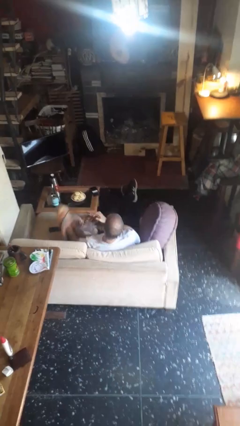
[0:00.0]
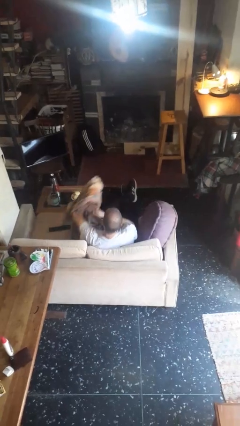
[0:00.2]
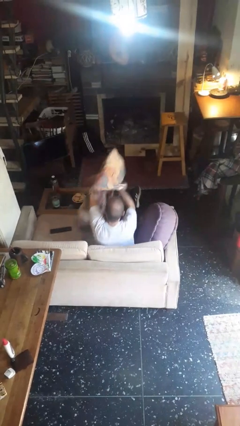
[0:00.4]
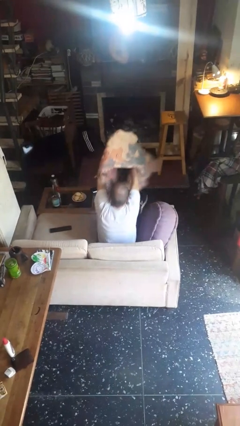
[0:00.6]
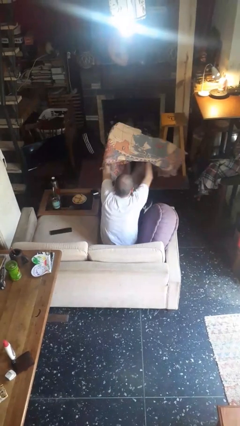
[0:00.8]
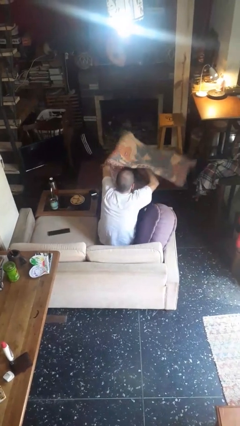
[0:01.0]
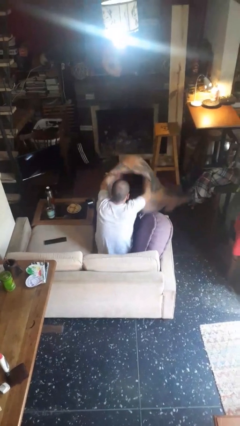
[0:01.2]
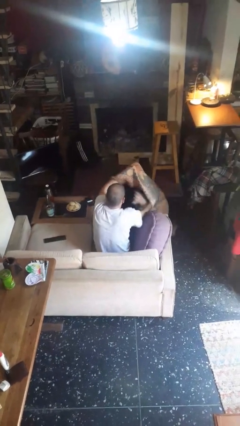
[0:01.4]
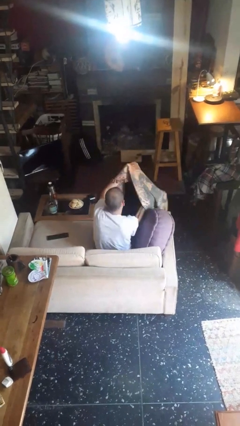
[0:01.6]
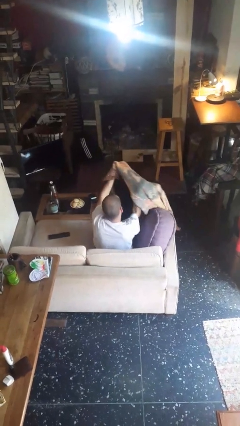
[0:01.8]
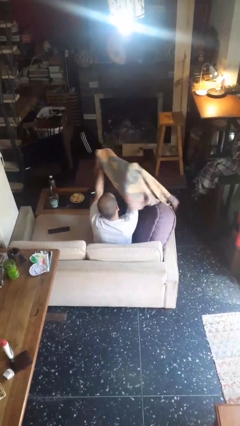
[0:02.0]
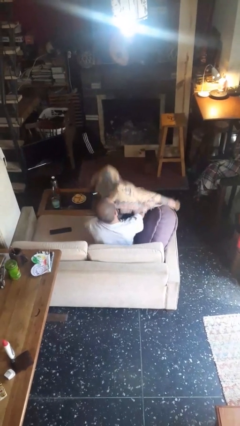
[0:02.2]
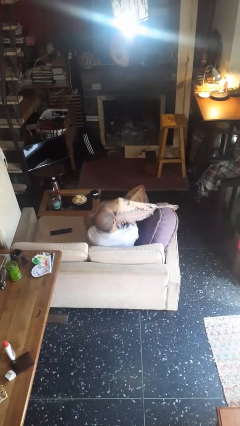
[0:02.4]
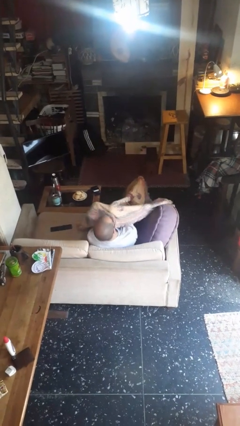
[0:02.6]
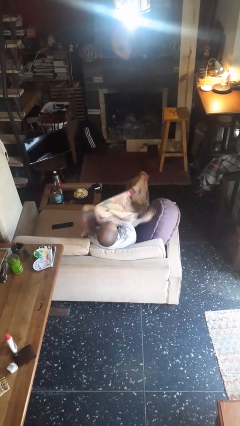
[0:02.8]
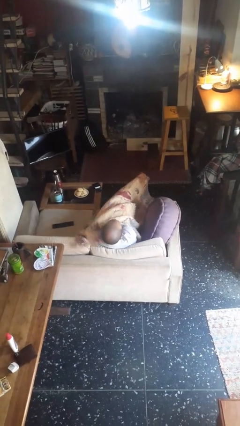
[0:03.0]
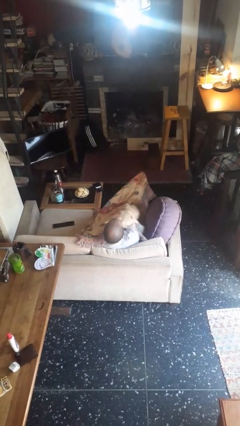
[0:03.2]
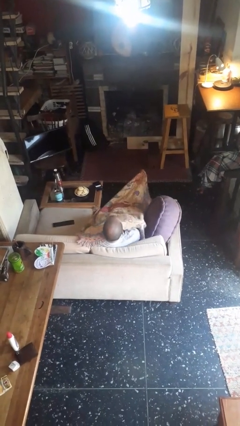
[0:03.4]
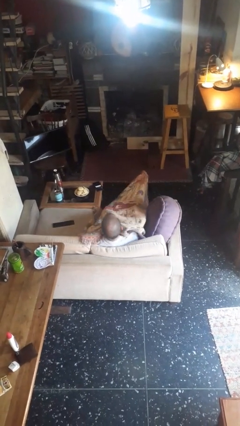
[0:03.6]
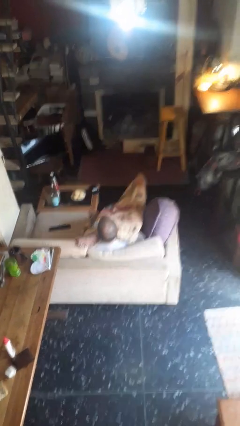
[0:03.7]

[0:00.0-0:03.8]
person covers with blanket

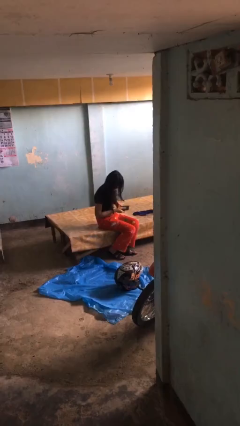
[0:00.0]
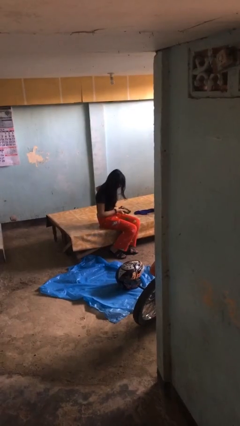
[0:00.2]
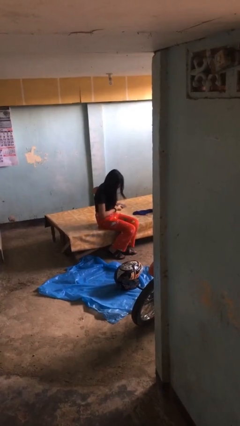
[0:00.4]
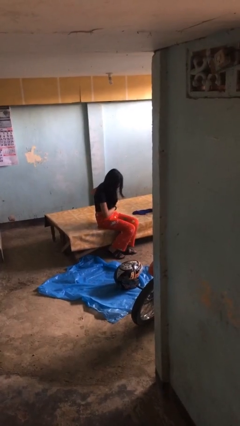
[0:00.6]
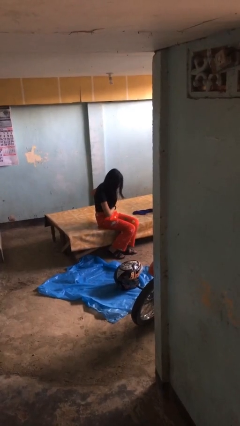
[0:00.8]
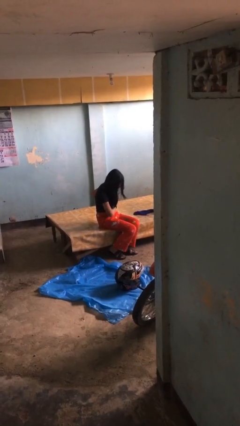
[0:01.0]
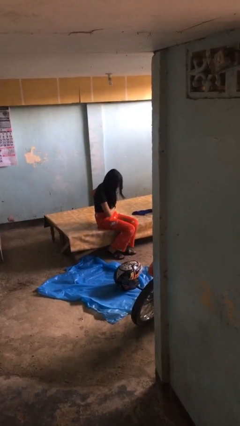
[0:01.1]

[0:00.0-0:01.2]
person puts phone into pocket

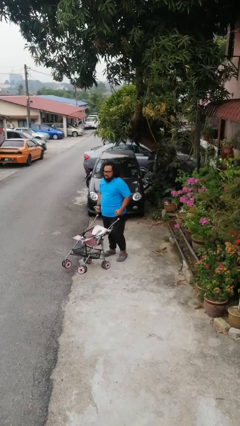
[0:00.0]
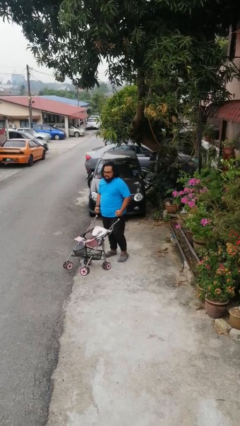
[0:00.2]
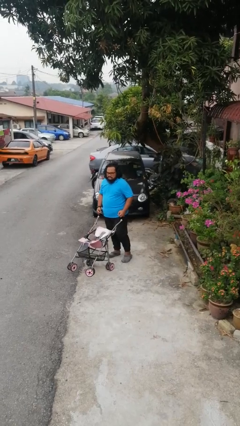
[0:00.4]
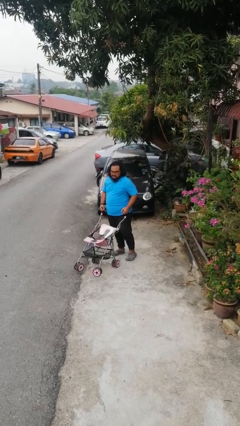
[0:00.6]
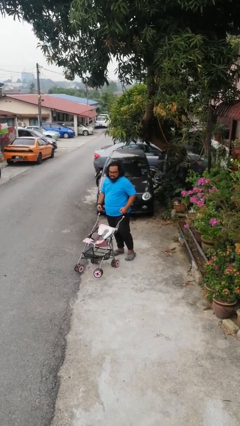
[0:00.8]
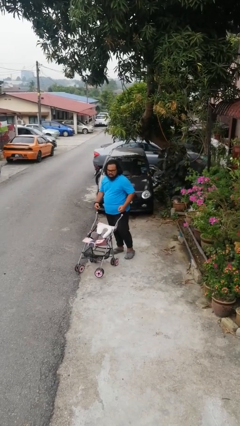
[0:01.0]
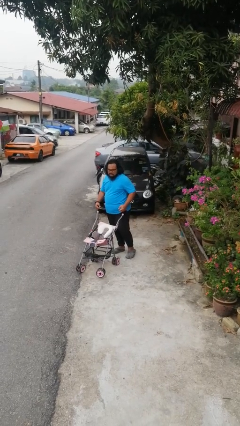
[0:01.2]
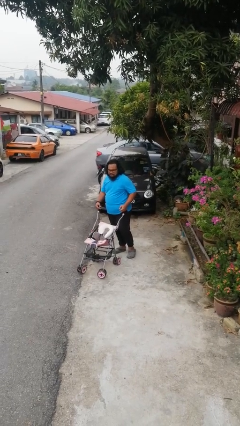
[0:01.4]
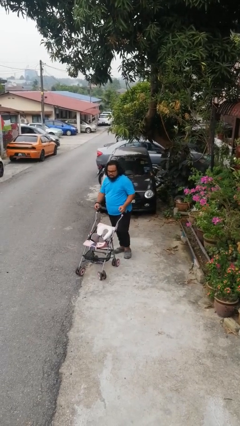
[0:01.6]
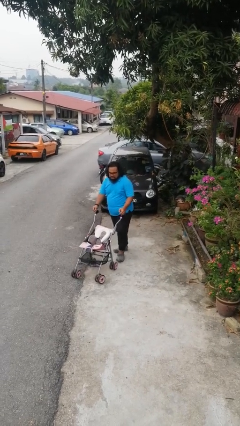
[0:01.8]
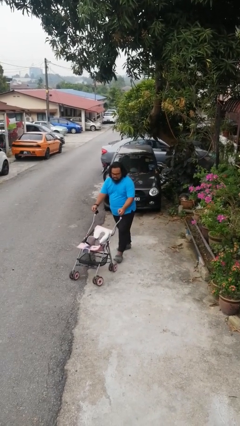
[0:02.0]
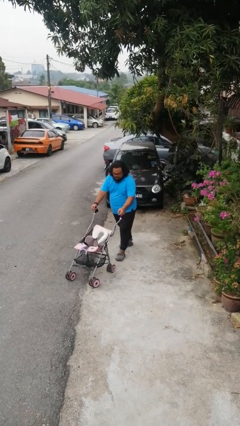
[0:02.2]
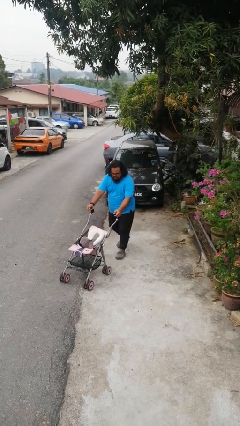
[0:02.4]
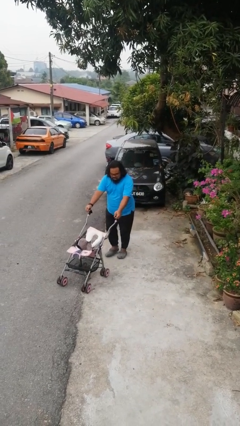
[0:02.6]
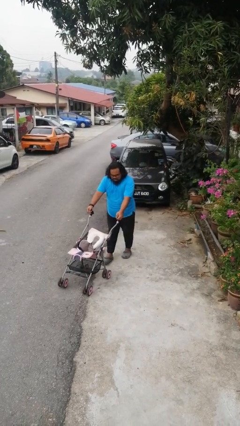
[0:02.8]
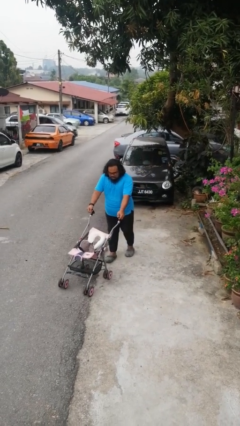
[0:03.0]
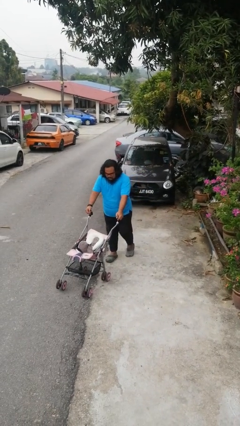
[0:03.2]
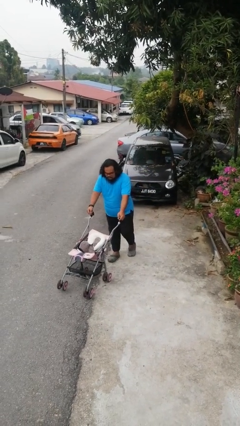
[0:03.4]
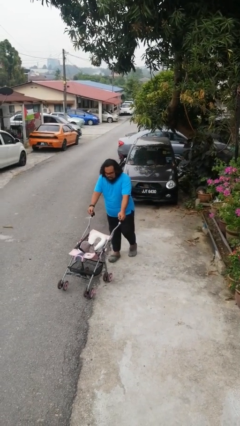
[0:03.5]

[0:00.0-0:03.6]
person pushes wheeled cart

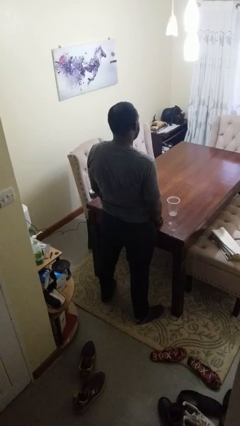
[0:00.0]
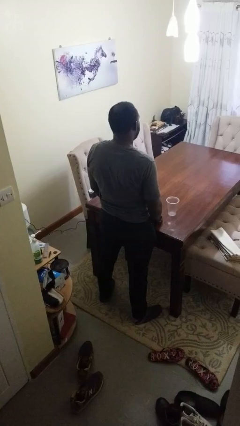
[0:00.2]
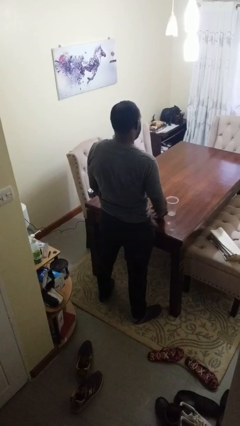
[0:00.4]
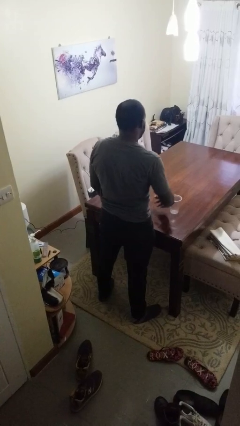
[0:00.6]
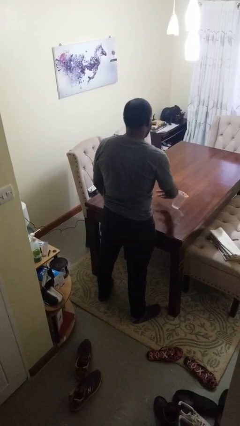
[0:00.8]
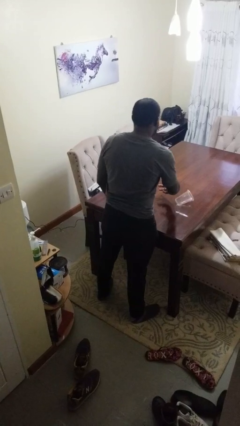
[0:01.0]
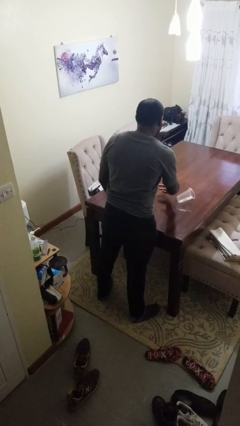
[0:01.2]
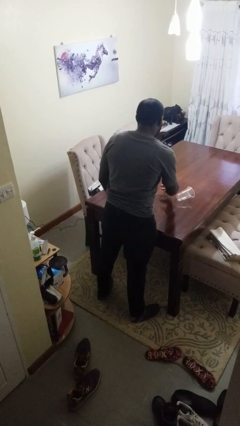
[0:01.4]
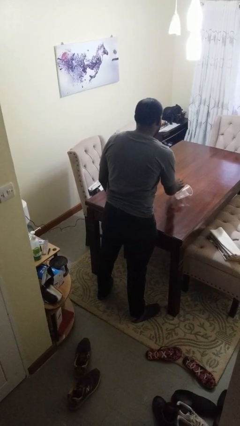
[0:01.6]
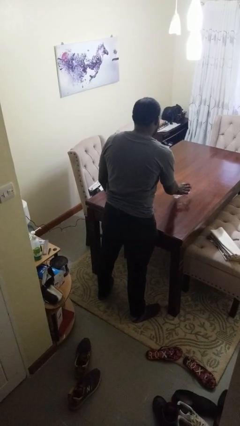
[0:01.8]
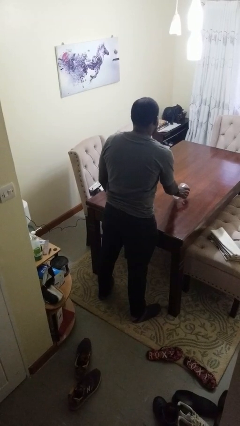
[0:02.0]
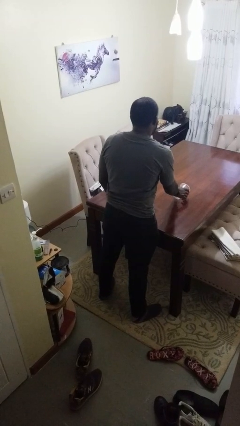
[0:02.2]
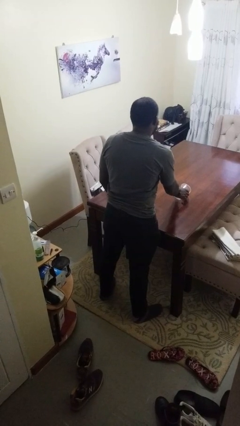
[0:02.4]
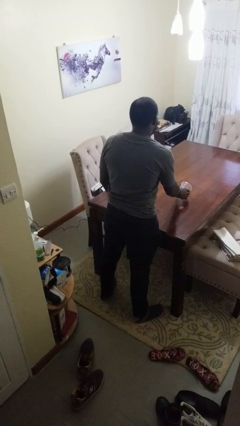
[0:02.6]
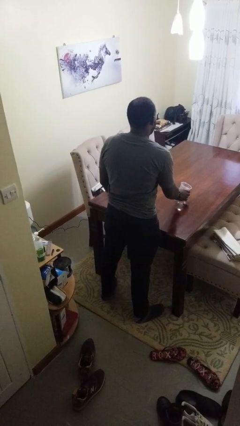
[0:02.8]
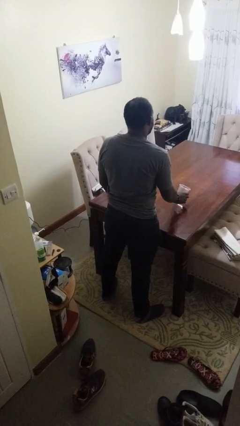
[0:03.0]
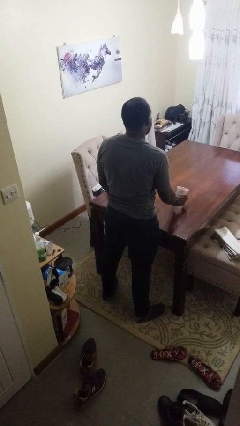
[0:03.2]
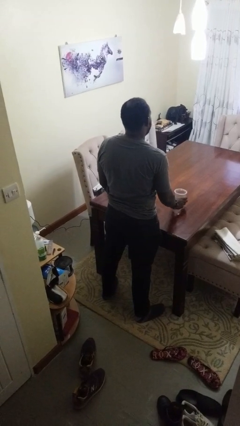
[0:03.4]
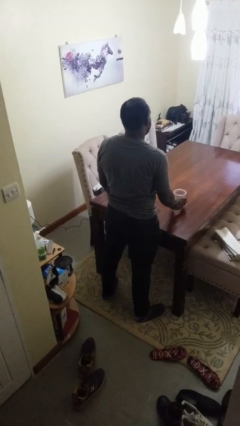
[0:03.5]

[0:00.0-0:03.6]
person knocks over glass

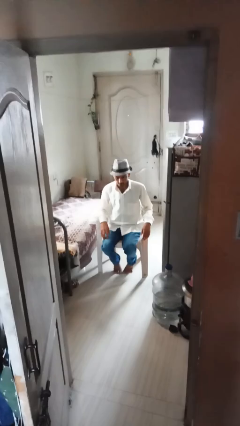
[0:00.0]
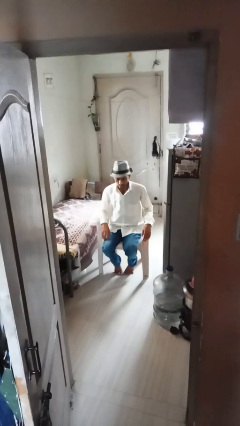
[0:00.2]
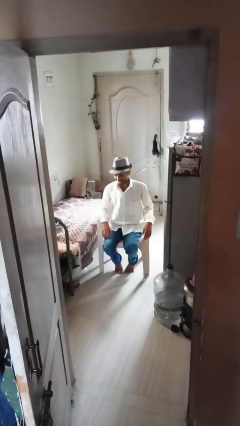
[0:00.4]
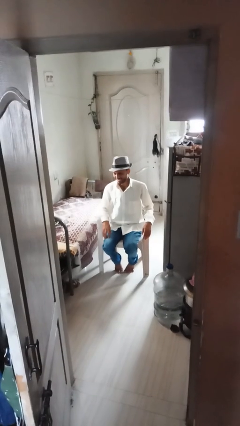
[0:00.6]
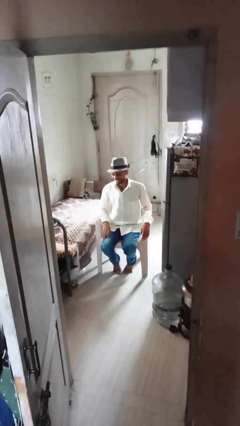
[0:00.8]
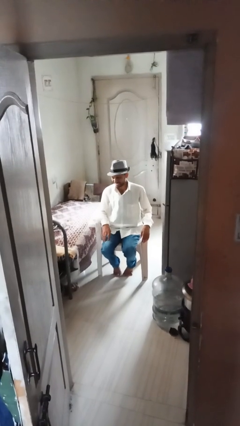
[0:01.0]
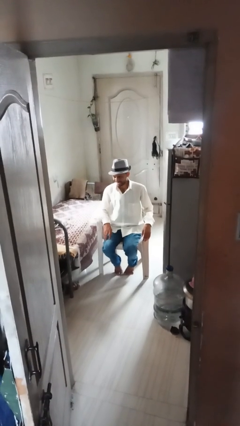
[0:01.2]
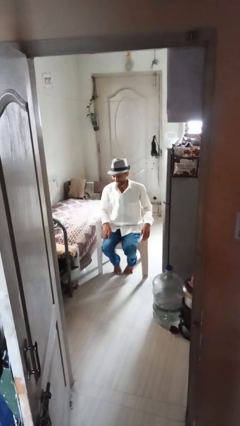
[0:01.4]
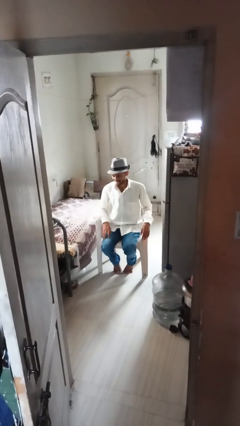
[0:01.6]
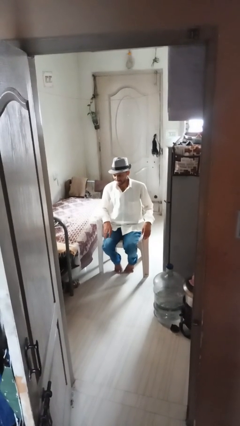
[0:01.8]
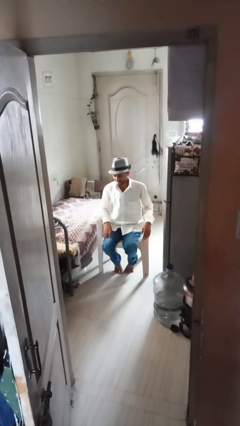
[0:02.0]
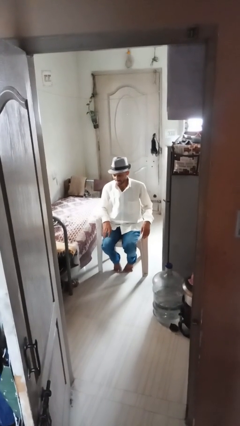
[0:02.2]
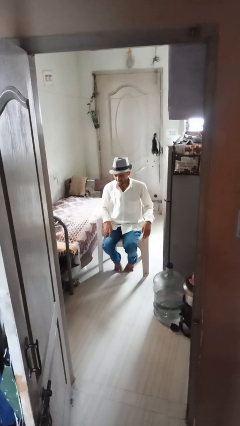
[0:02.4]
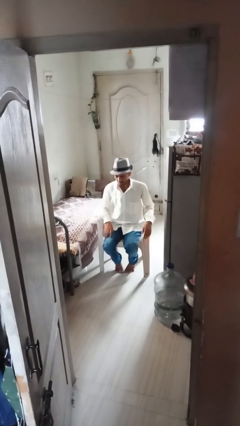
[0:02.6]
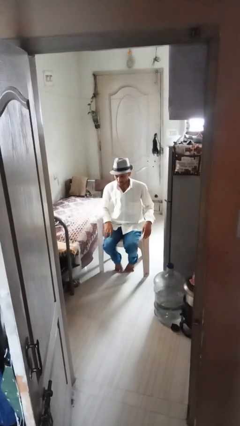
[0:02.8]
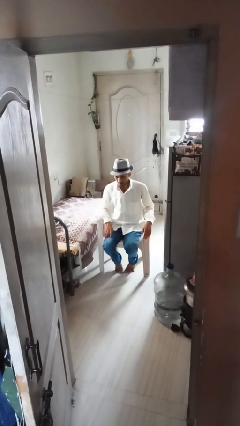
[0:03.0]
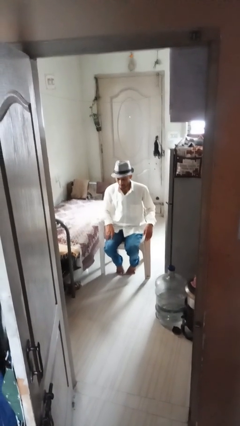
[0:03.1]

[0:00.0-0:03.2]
person sticks out tongue

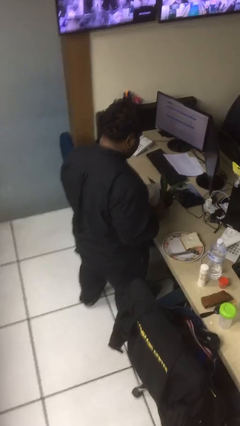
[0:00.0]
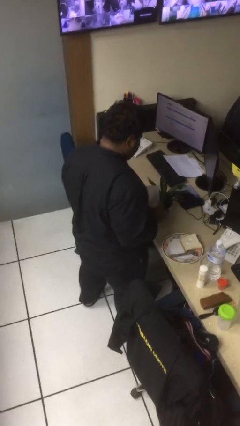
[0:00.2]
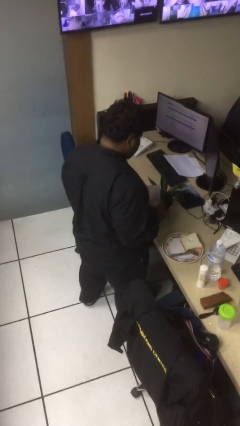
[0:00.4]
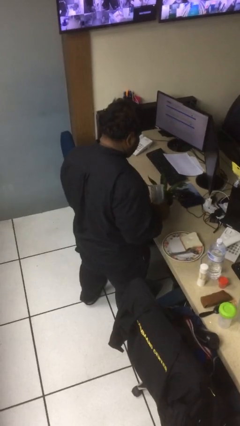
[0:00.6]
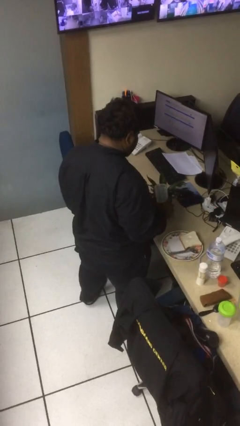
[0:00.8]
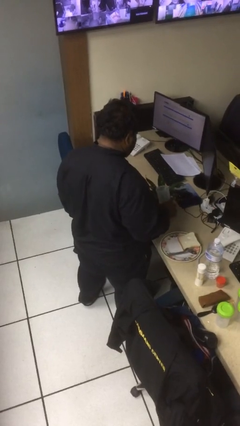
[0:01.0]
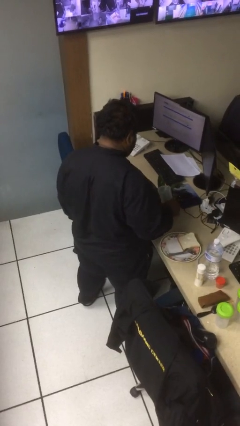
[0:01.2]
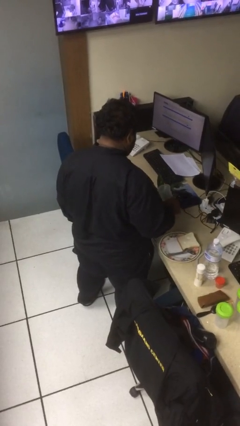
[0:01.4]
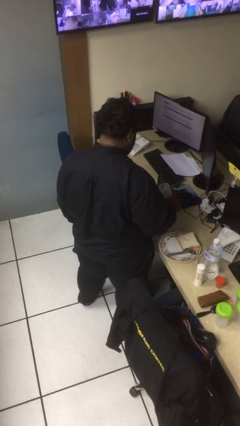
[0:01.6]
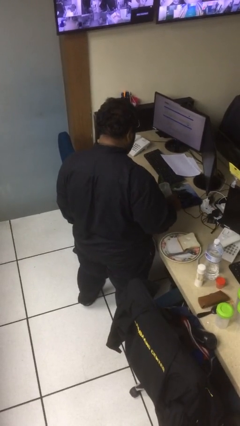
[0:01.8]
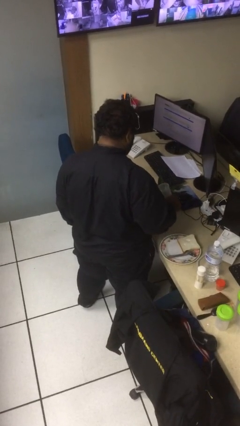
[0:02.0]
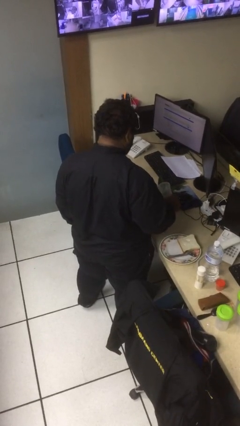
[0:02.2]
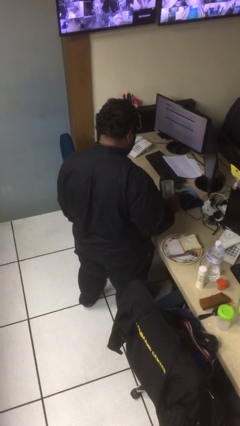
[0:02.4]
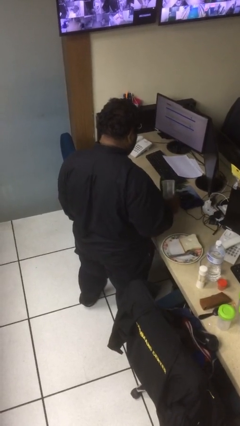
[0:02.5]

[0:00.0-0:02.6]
person waters houseplant
